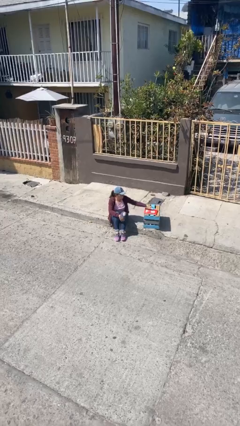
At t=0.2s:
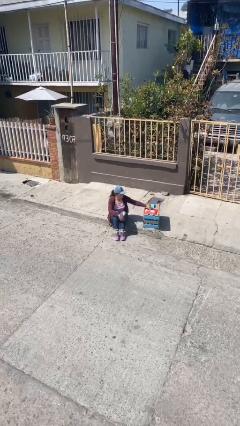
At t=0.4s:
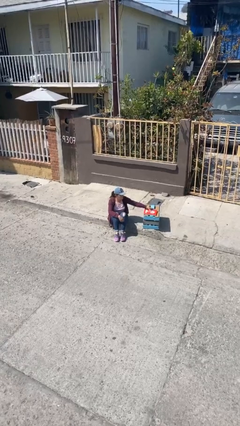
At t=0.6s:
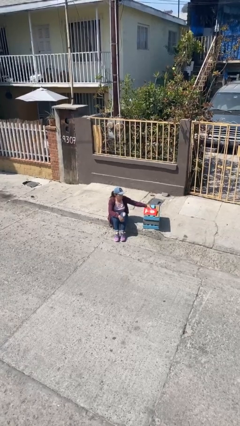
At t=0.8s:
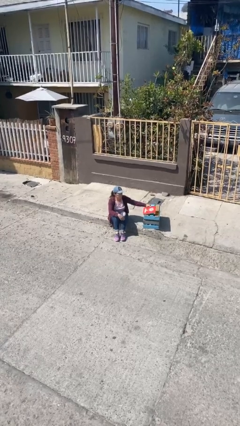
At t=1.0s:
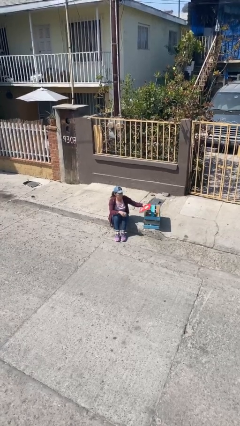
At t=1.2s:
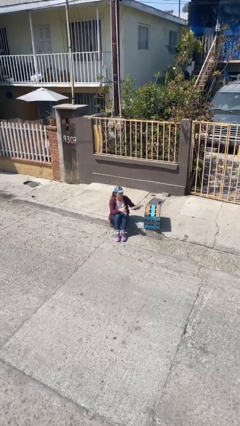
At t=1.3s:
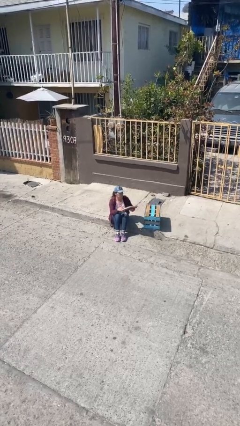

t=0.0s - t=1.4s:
person picks up object from table

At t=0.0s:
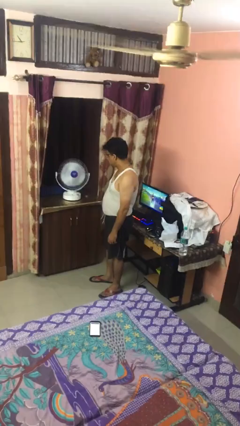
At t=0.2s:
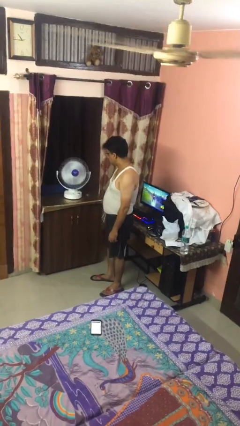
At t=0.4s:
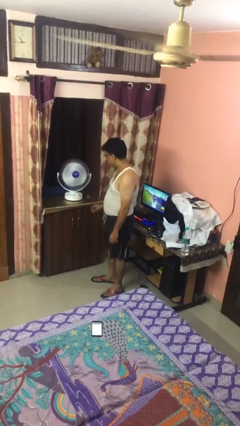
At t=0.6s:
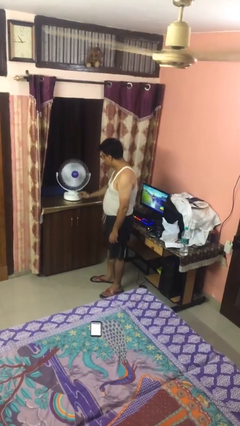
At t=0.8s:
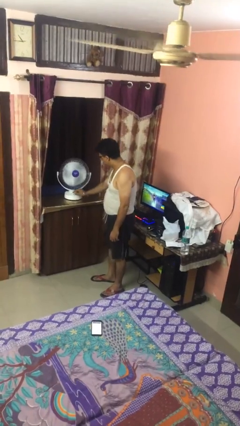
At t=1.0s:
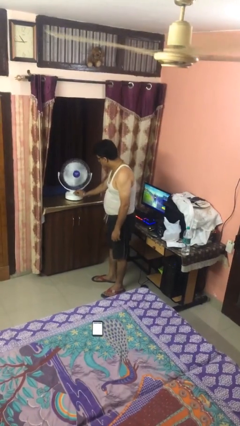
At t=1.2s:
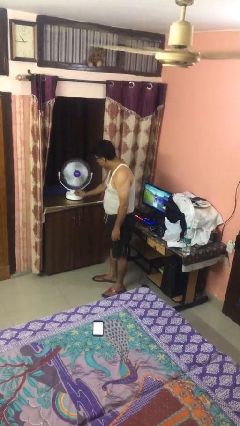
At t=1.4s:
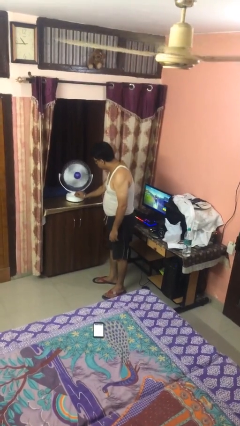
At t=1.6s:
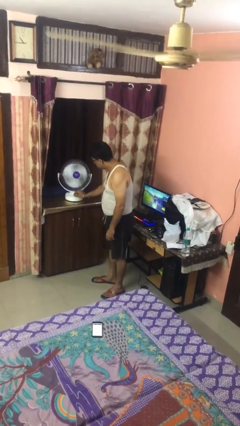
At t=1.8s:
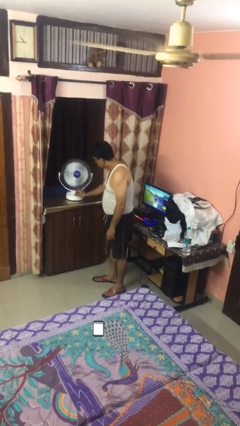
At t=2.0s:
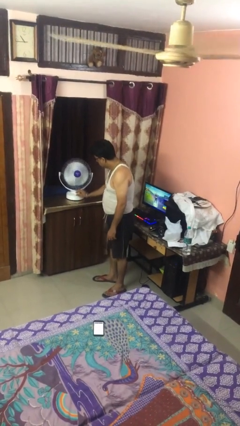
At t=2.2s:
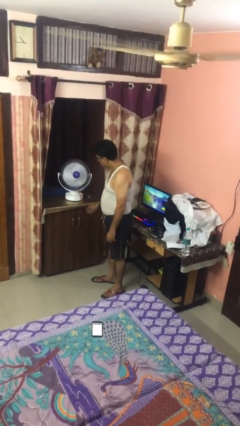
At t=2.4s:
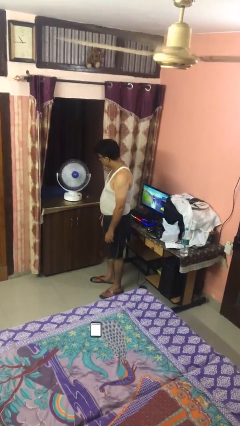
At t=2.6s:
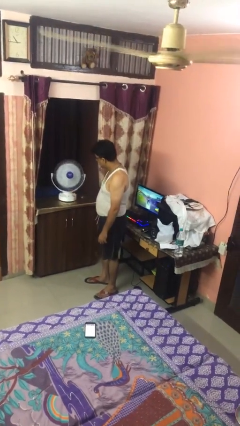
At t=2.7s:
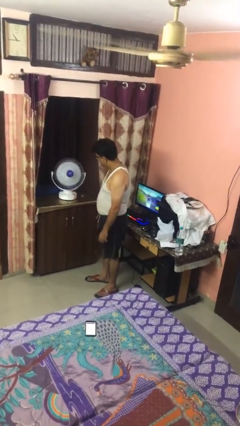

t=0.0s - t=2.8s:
person turns on fan

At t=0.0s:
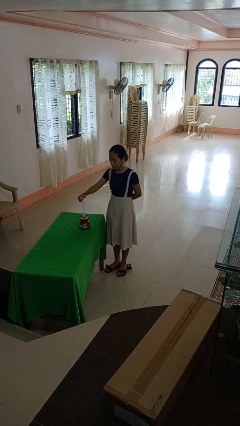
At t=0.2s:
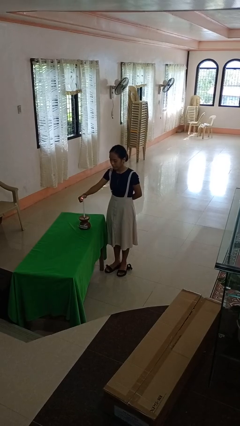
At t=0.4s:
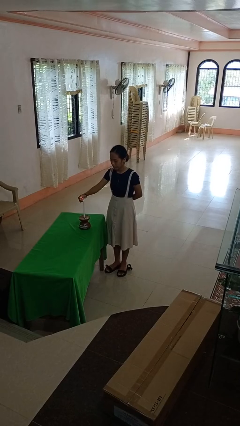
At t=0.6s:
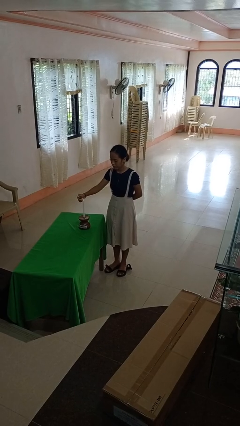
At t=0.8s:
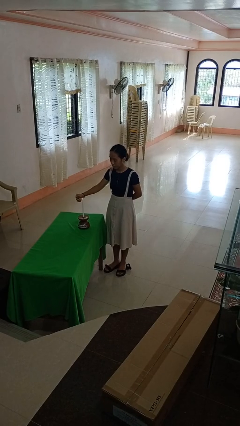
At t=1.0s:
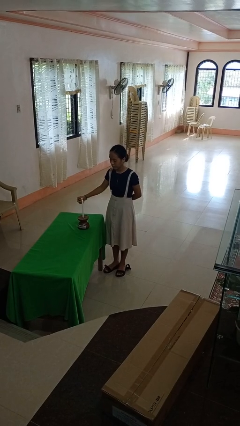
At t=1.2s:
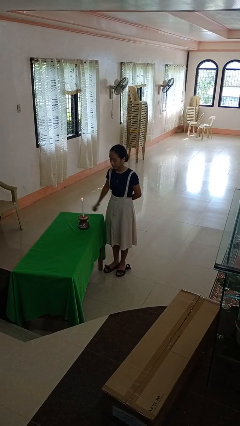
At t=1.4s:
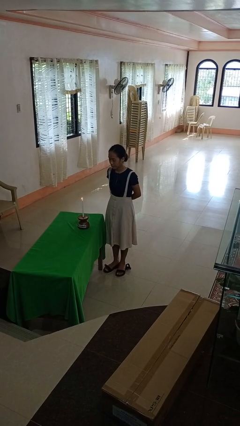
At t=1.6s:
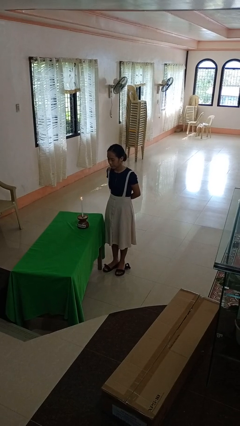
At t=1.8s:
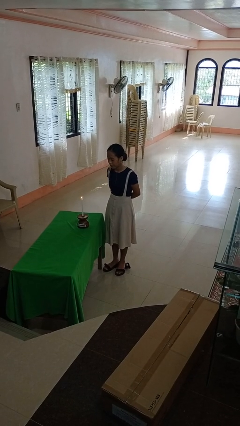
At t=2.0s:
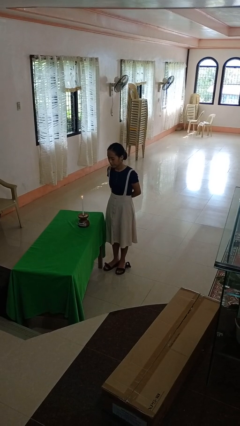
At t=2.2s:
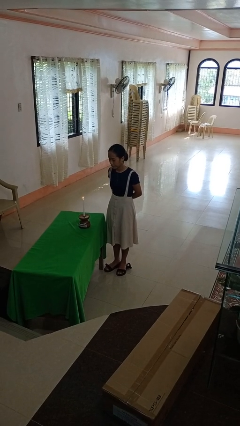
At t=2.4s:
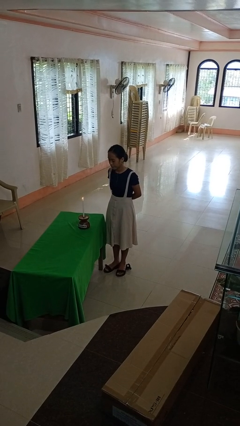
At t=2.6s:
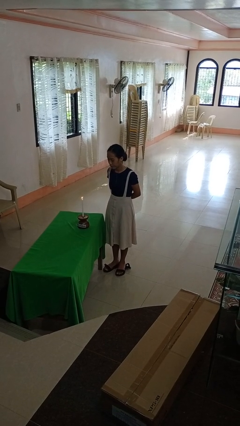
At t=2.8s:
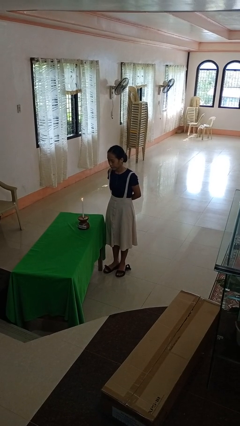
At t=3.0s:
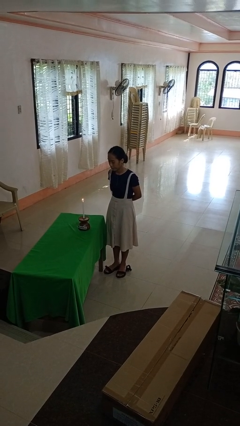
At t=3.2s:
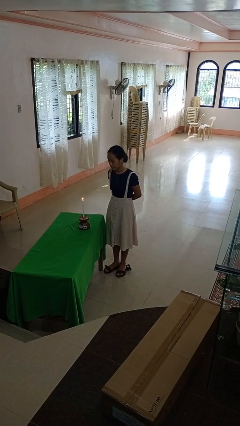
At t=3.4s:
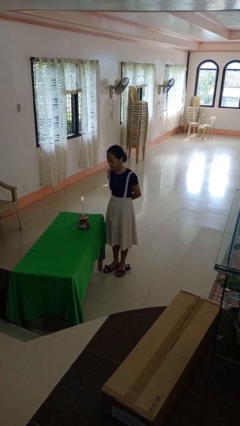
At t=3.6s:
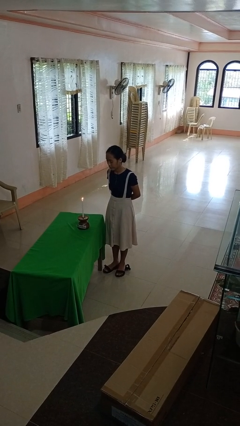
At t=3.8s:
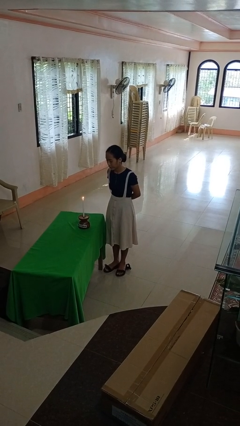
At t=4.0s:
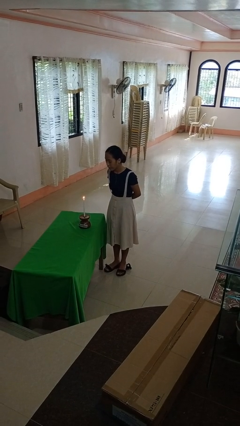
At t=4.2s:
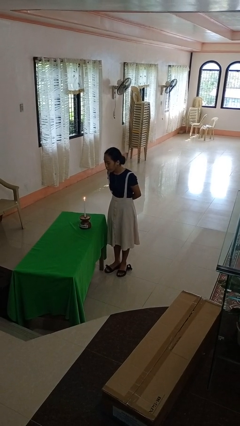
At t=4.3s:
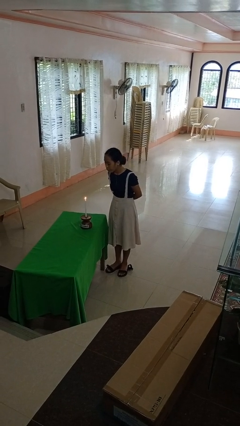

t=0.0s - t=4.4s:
person lights candle

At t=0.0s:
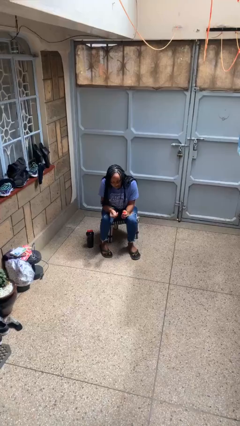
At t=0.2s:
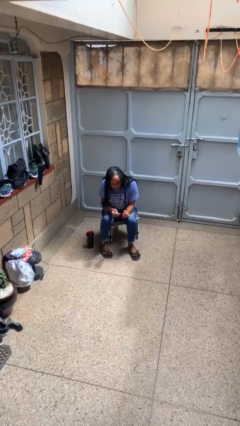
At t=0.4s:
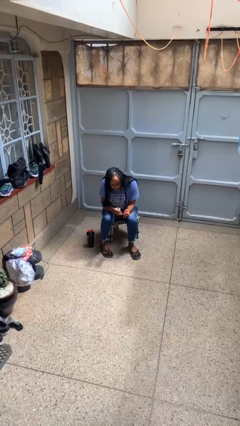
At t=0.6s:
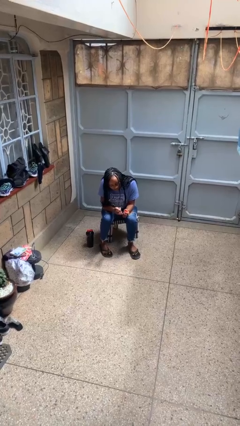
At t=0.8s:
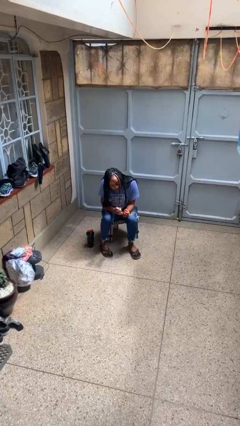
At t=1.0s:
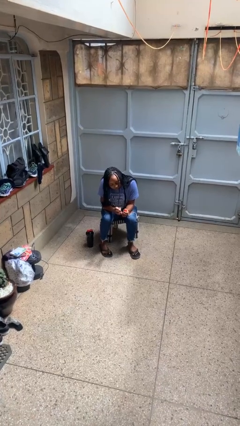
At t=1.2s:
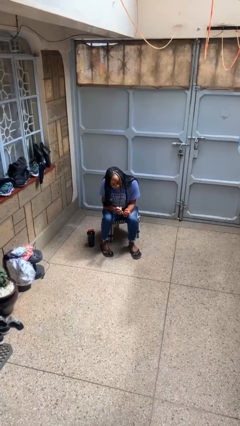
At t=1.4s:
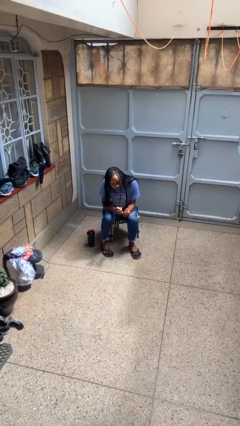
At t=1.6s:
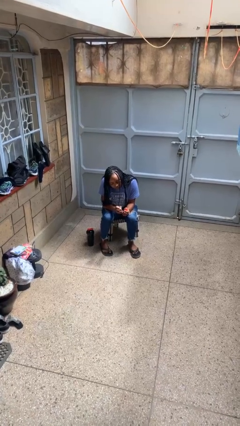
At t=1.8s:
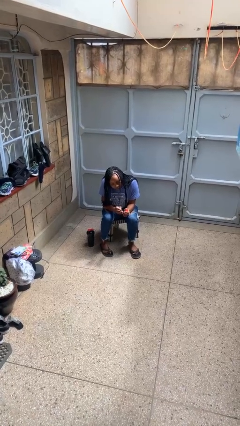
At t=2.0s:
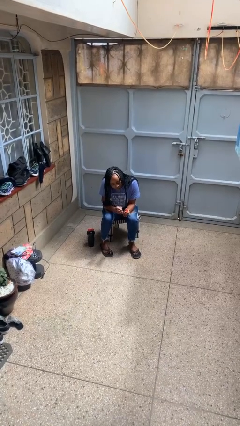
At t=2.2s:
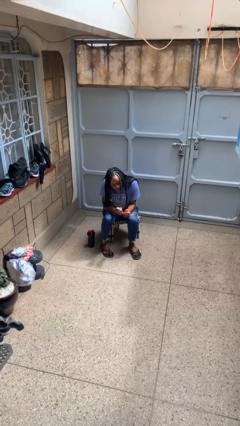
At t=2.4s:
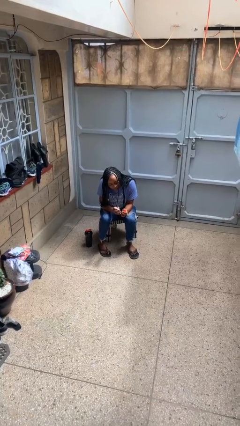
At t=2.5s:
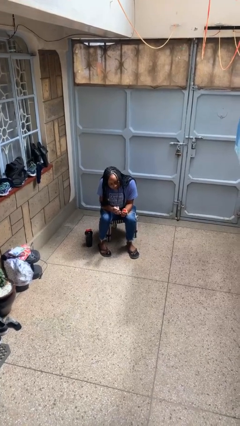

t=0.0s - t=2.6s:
person paints fingernails

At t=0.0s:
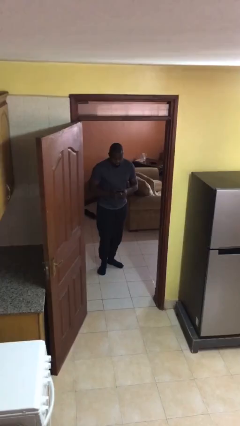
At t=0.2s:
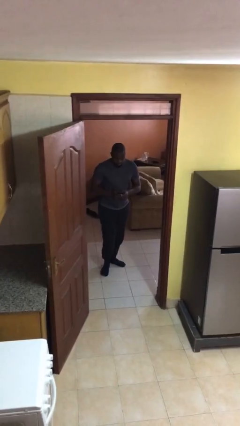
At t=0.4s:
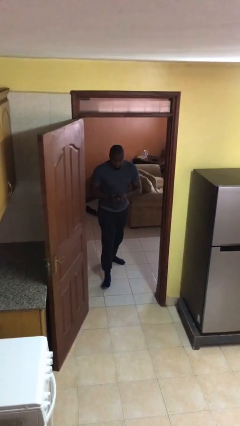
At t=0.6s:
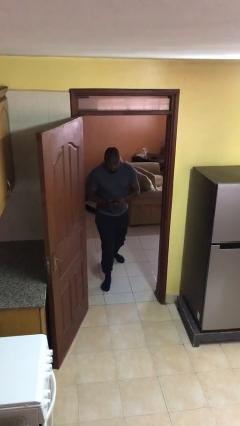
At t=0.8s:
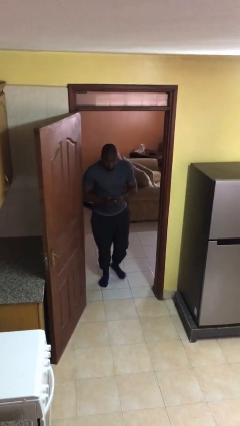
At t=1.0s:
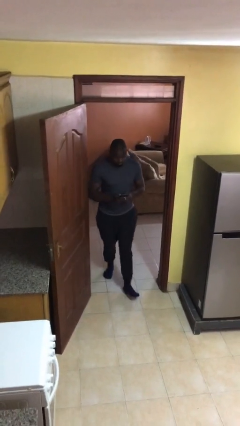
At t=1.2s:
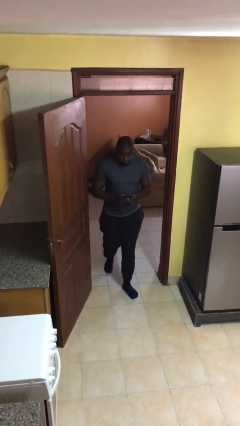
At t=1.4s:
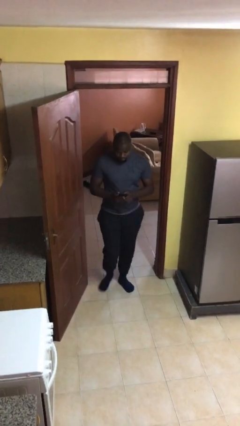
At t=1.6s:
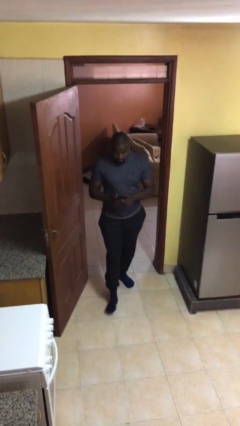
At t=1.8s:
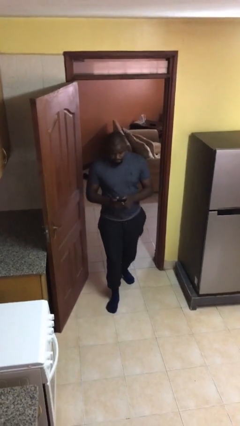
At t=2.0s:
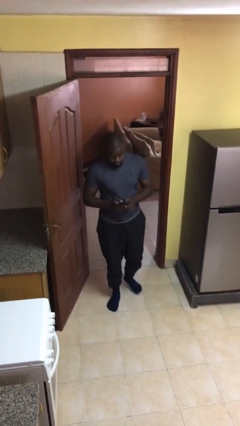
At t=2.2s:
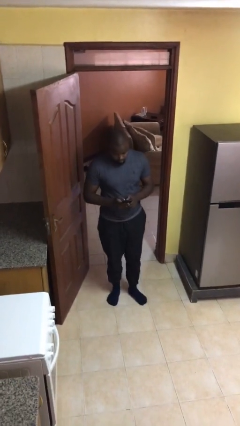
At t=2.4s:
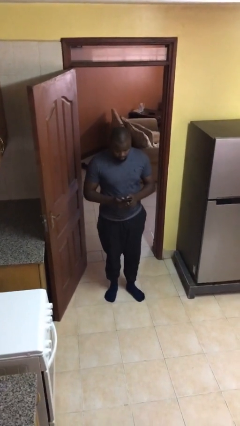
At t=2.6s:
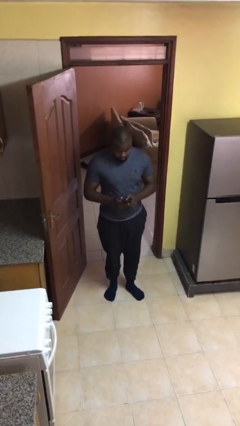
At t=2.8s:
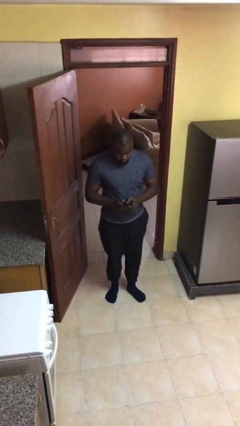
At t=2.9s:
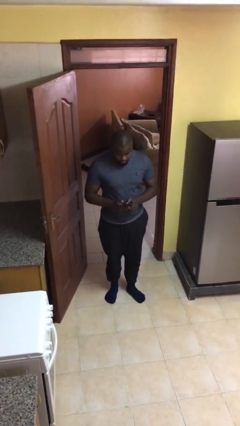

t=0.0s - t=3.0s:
person enters scene through structure

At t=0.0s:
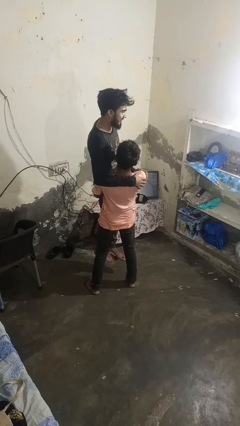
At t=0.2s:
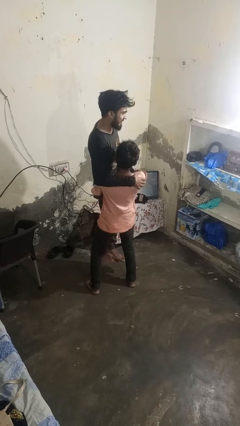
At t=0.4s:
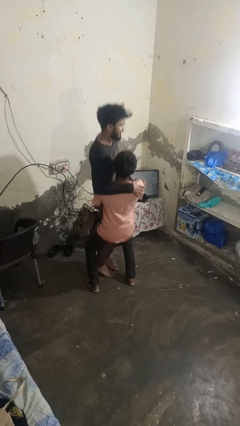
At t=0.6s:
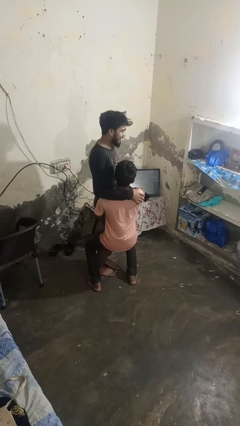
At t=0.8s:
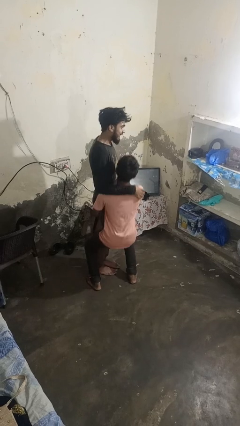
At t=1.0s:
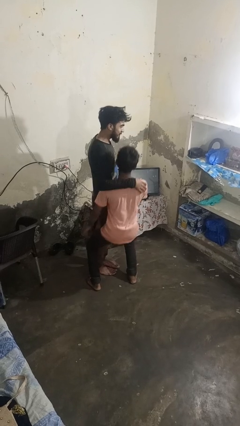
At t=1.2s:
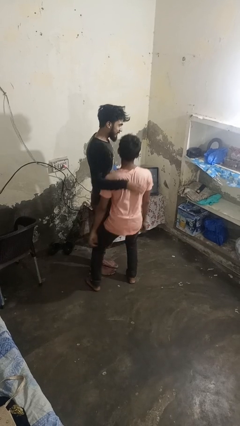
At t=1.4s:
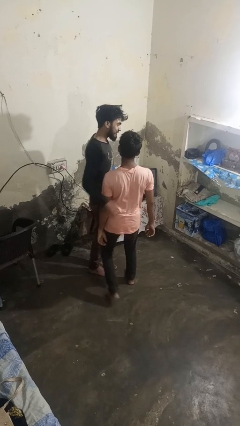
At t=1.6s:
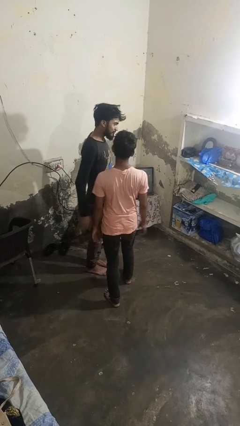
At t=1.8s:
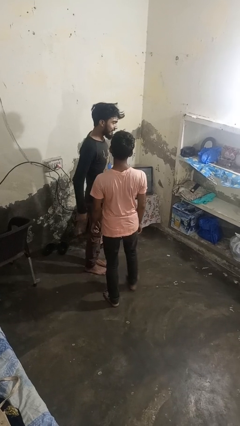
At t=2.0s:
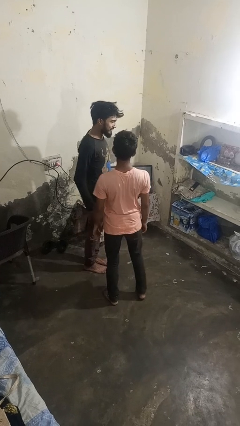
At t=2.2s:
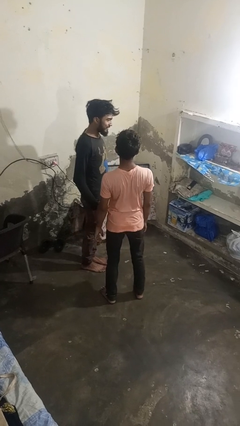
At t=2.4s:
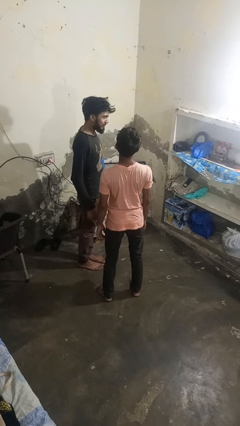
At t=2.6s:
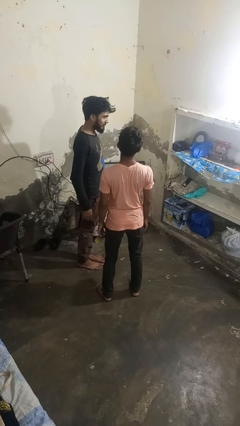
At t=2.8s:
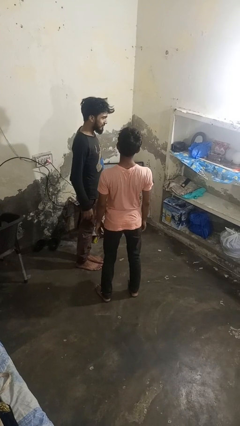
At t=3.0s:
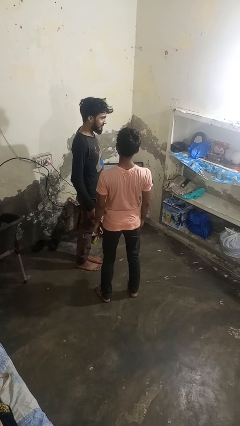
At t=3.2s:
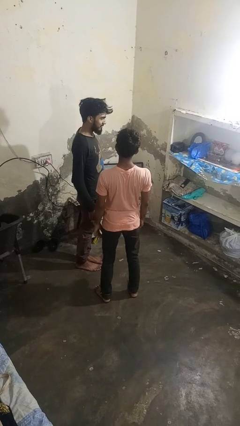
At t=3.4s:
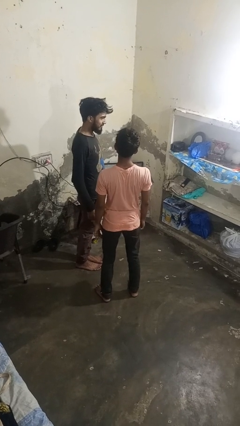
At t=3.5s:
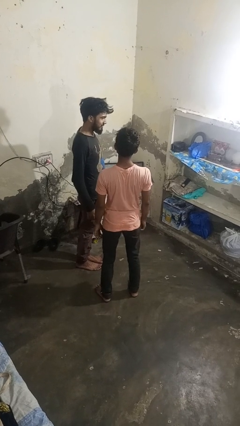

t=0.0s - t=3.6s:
person puts down person
